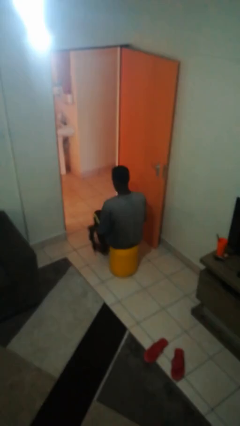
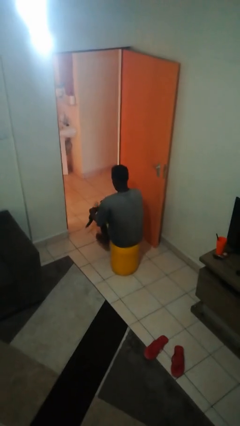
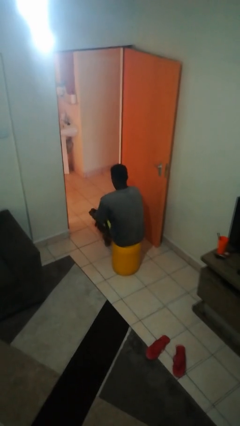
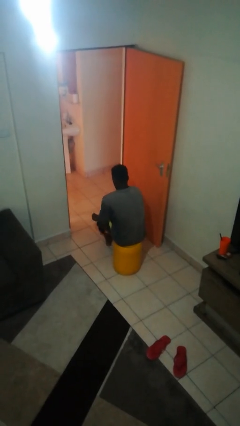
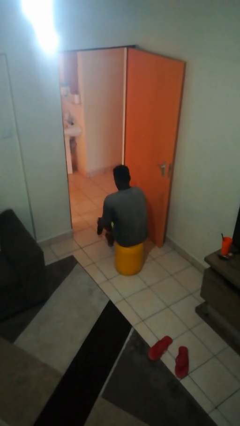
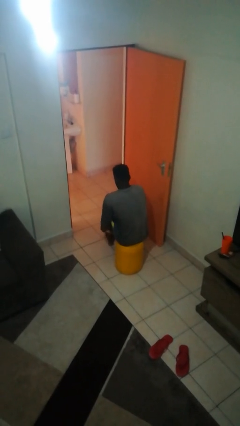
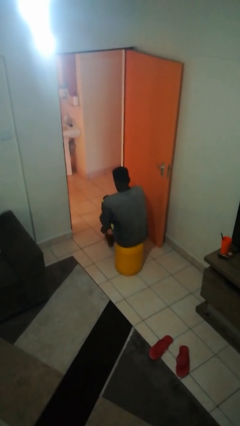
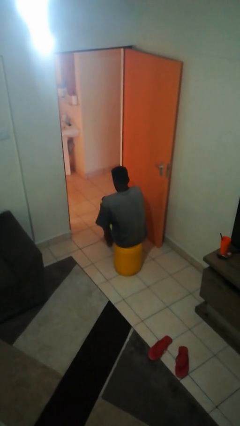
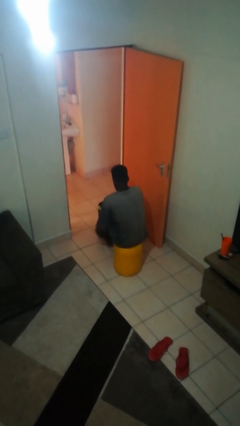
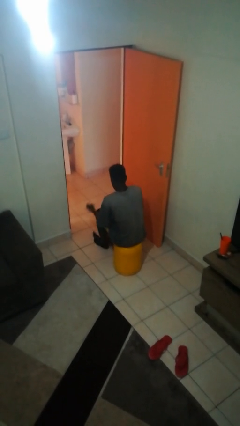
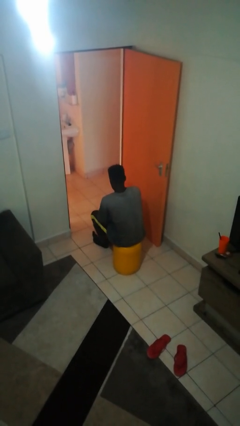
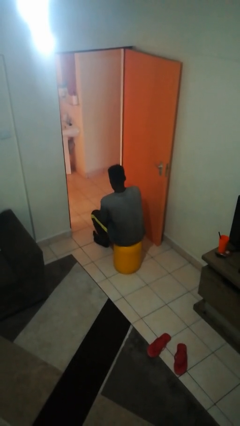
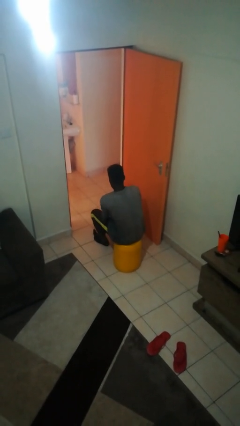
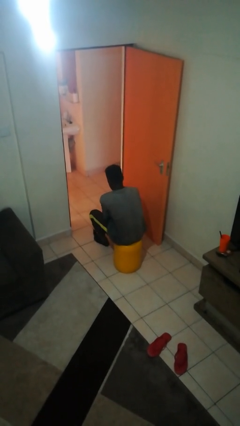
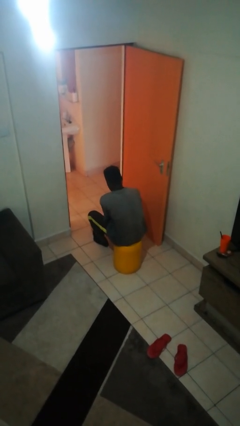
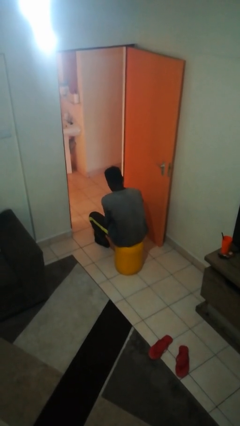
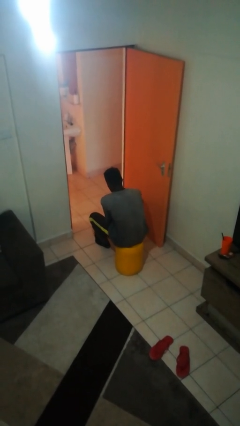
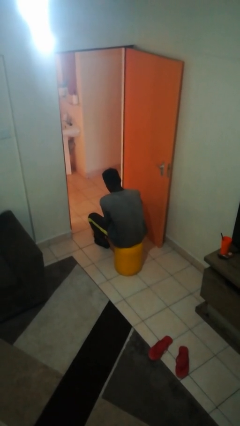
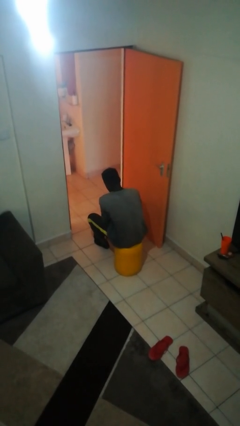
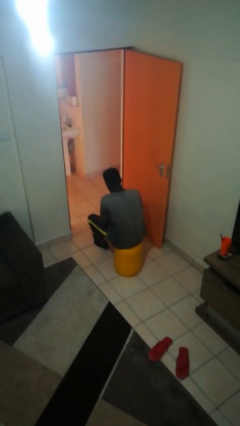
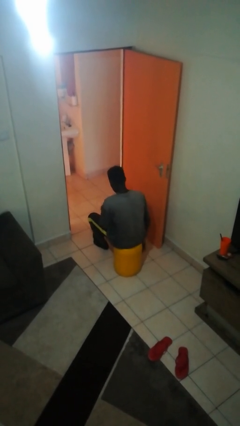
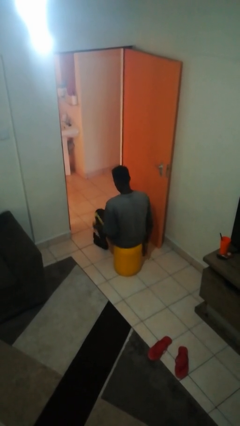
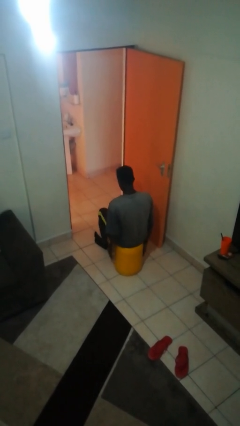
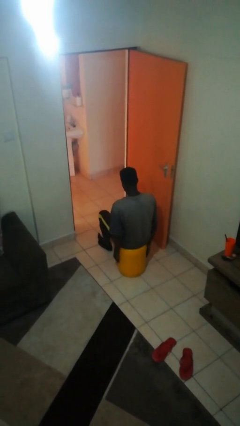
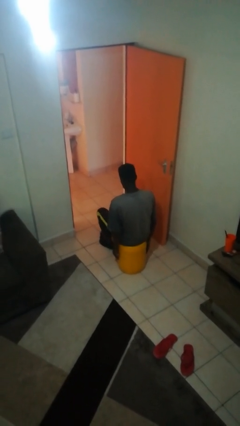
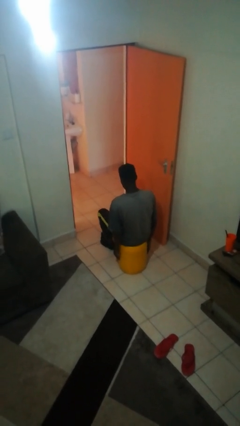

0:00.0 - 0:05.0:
person puts on socks

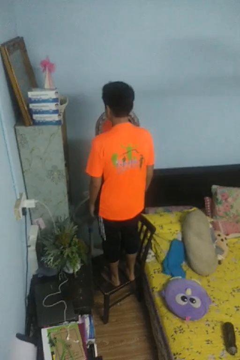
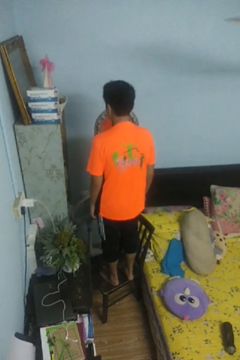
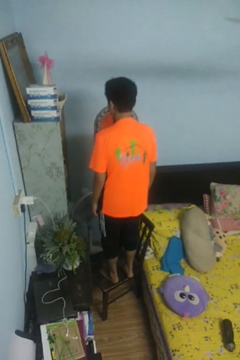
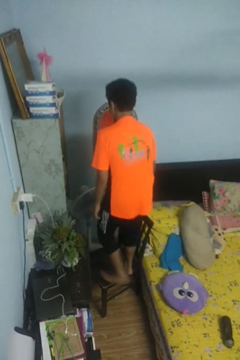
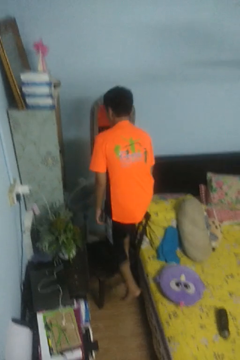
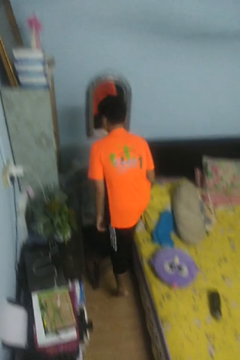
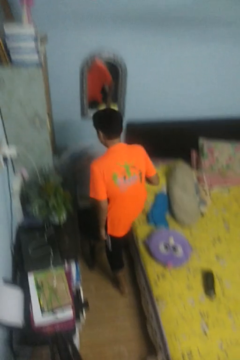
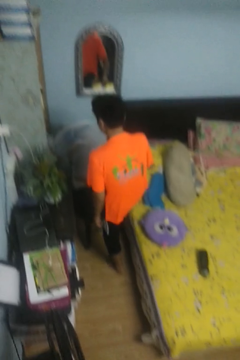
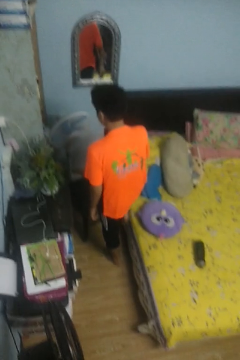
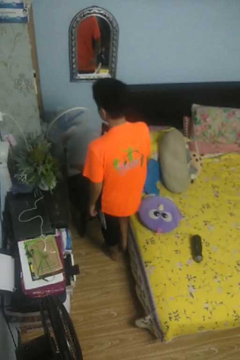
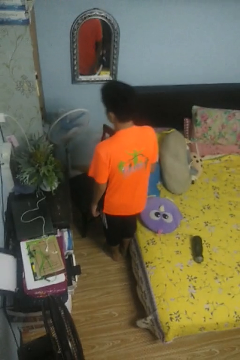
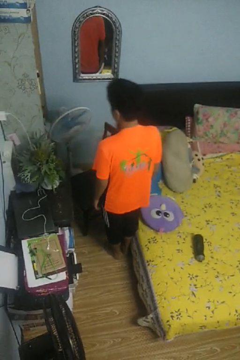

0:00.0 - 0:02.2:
person climbs off chair

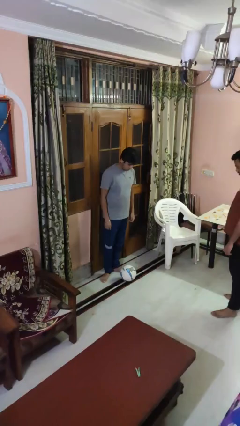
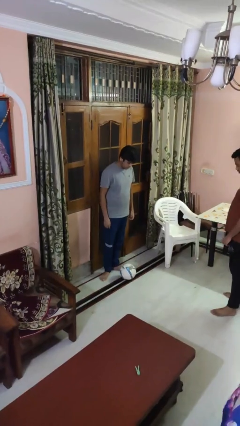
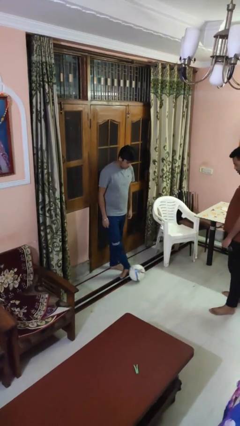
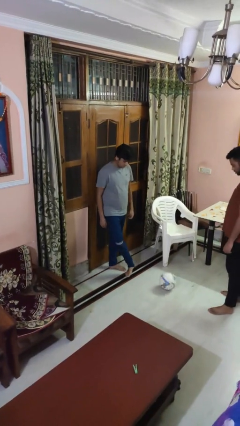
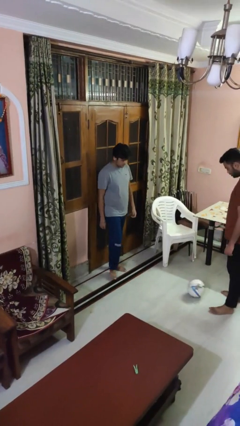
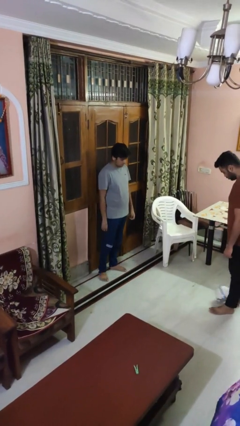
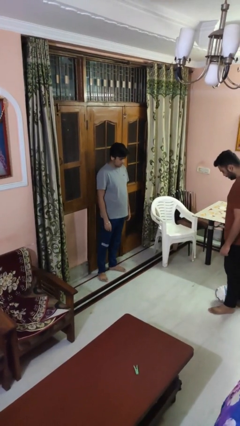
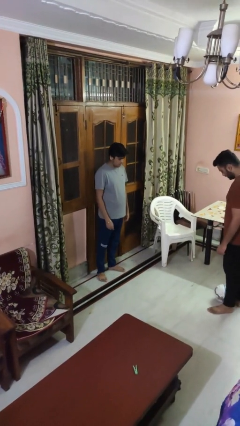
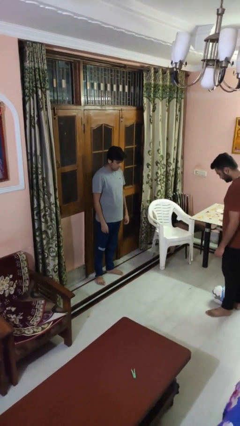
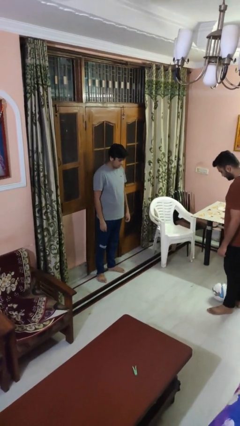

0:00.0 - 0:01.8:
person kicks object to person

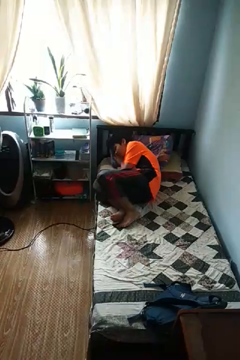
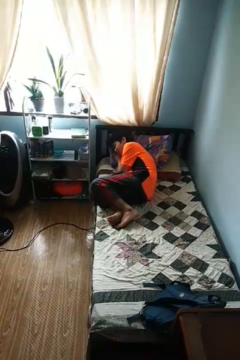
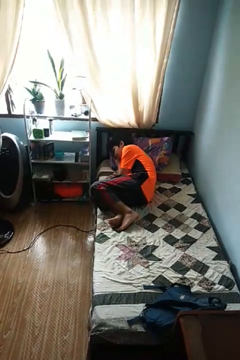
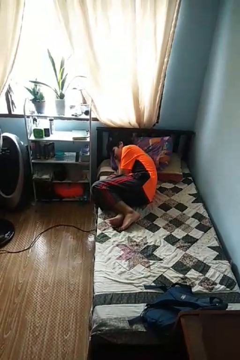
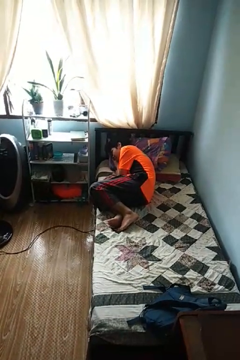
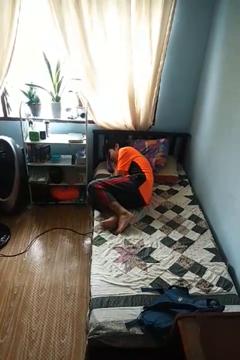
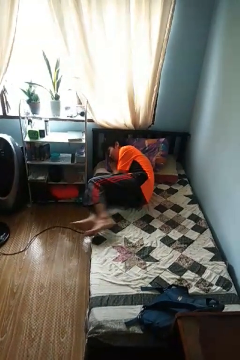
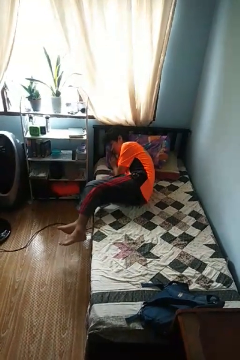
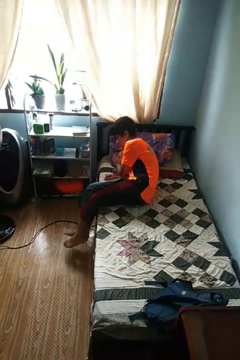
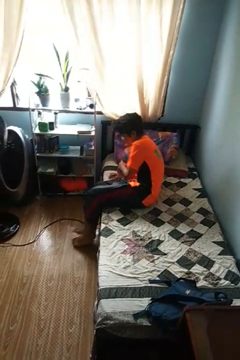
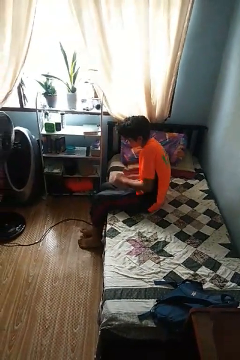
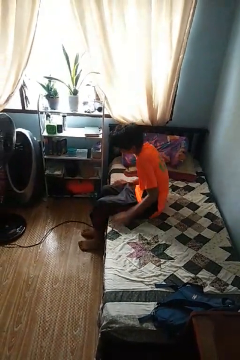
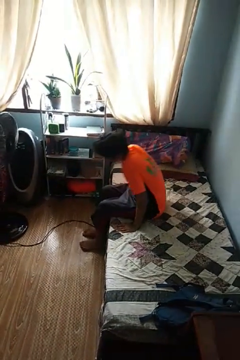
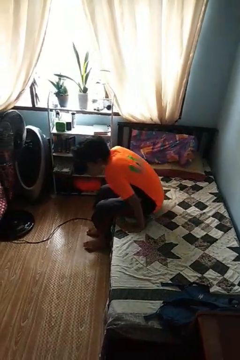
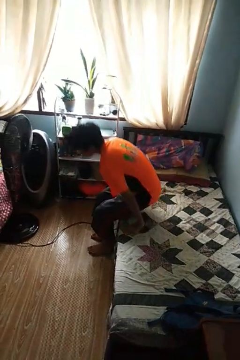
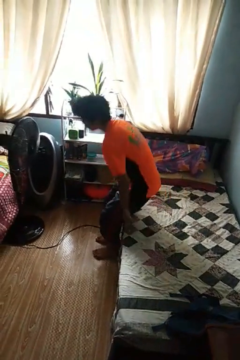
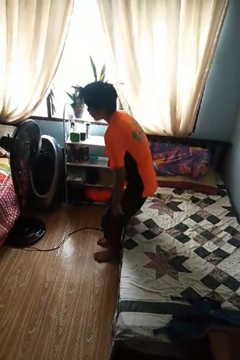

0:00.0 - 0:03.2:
person stands up

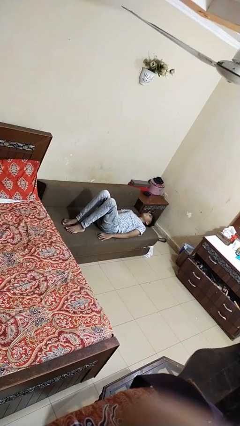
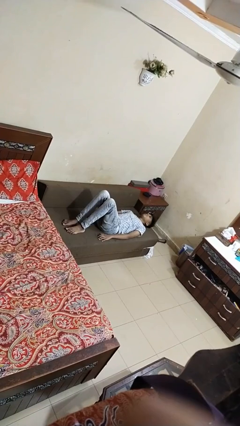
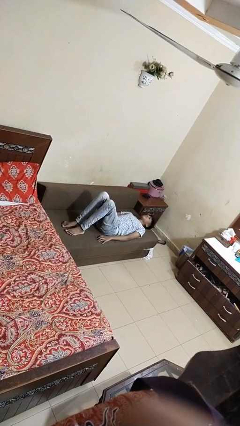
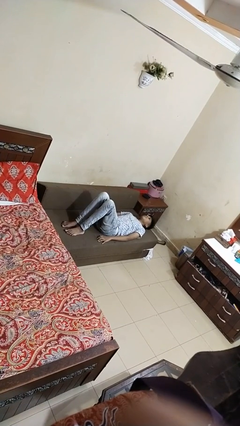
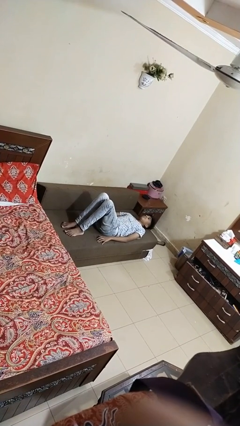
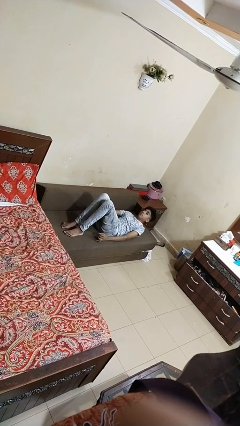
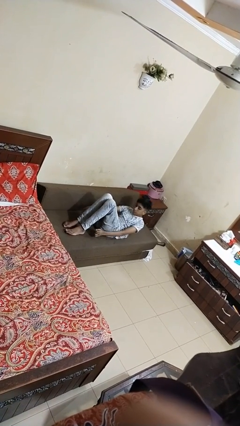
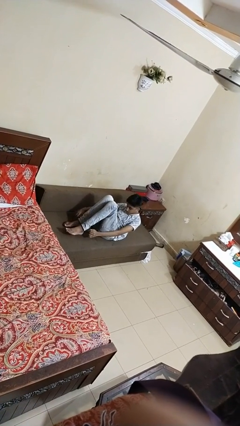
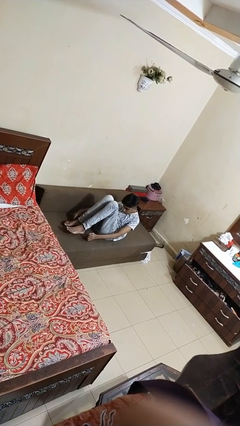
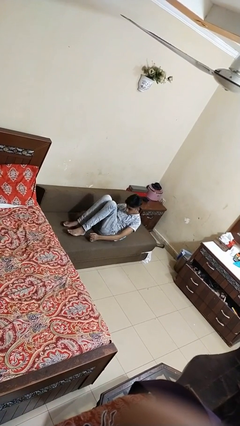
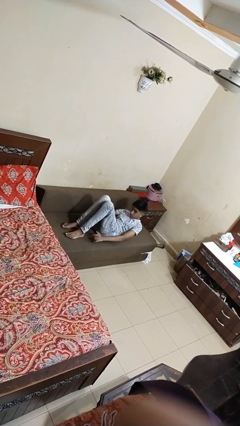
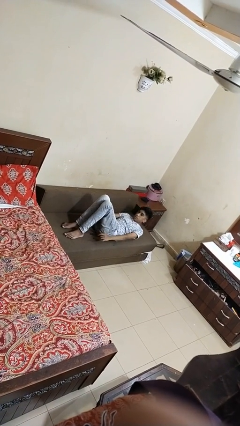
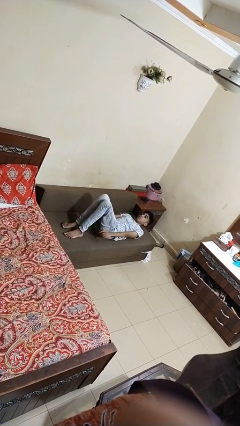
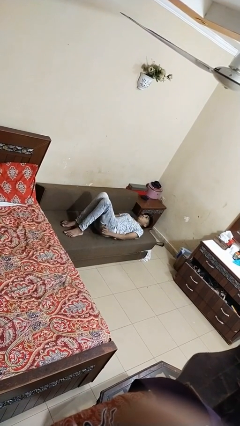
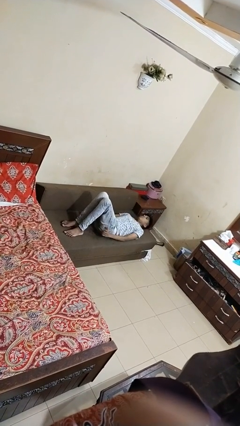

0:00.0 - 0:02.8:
person exercises with situp

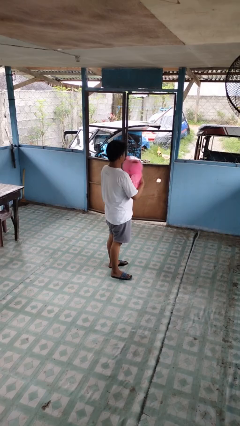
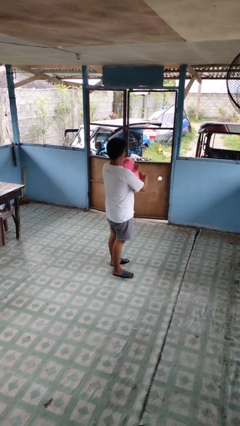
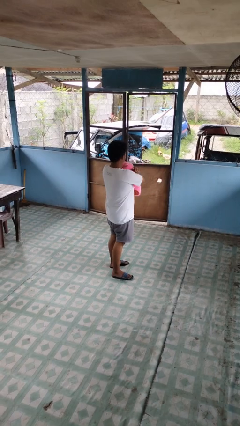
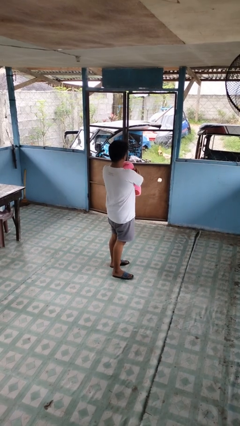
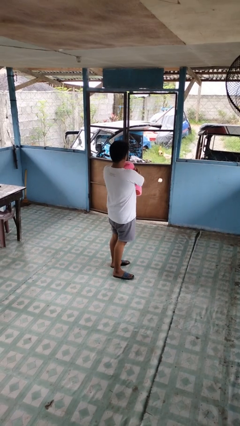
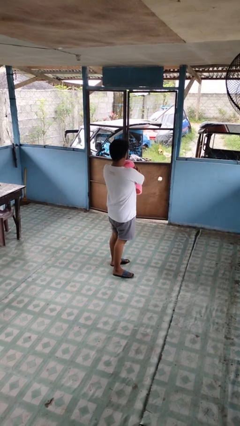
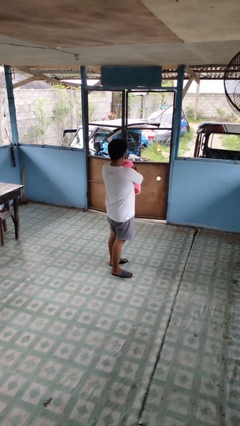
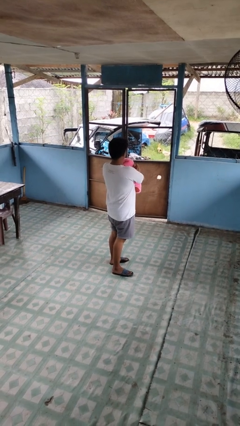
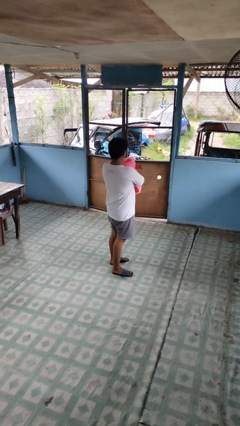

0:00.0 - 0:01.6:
person hugs stuffed animal

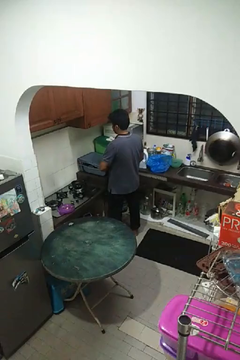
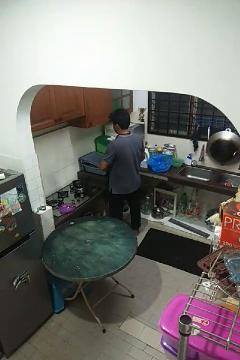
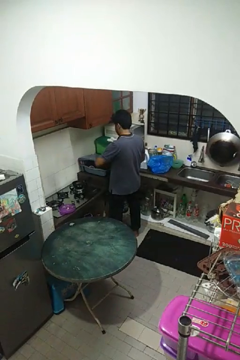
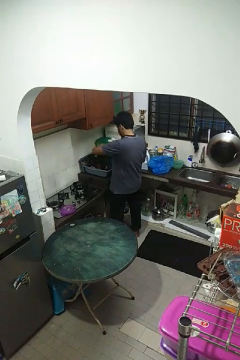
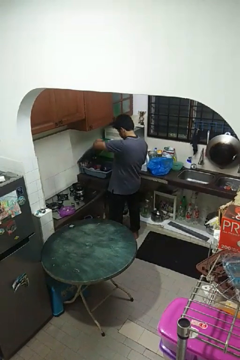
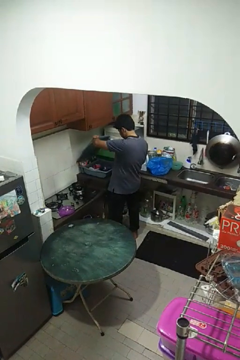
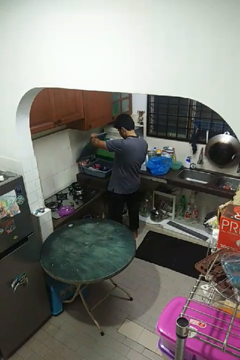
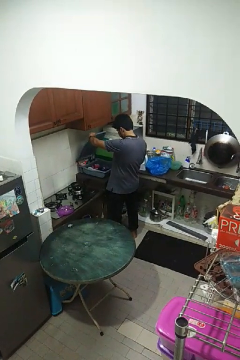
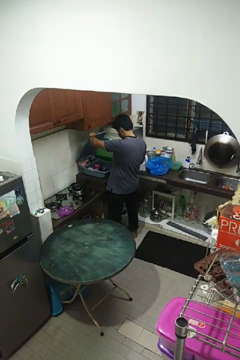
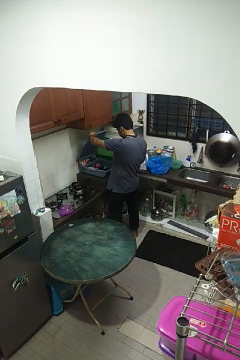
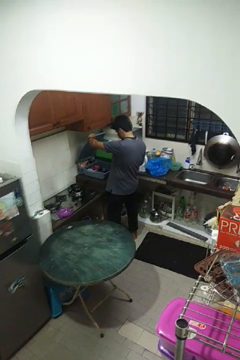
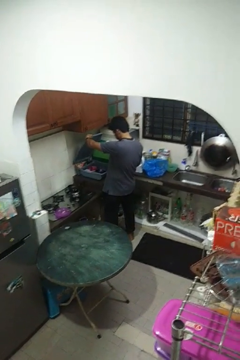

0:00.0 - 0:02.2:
person opens dishwasher
